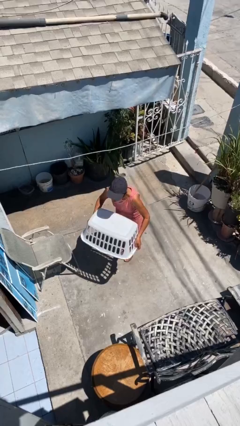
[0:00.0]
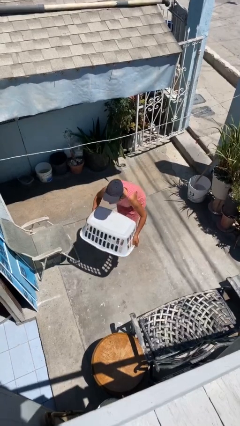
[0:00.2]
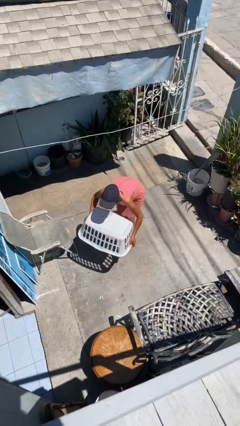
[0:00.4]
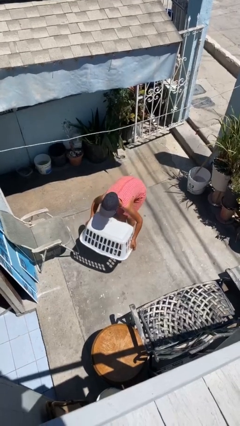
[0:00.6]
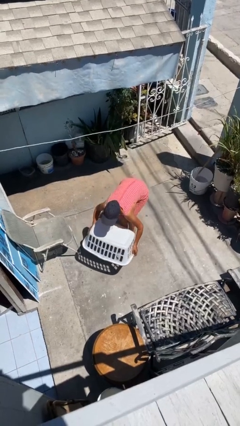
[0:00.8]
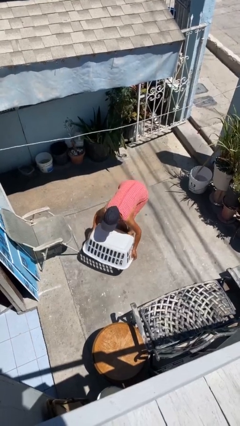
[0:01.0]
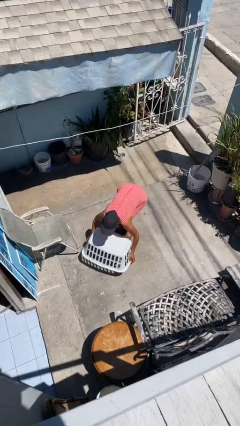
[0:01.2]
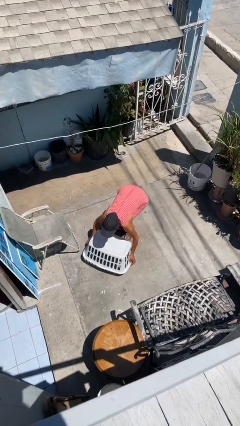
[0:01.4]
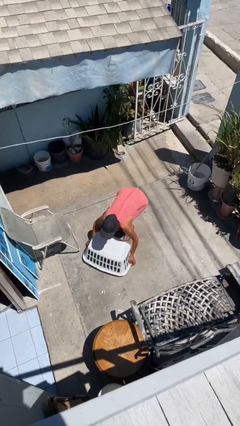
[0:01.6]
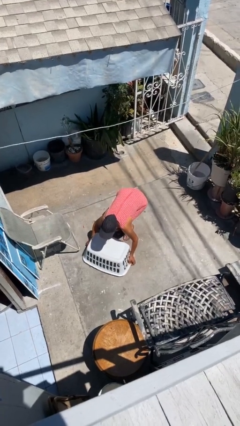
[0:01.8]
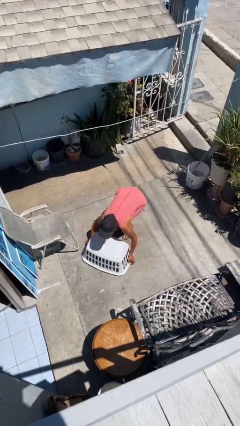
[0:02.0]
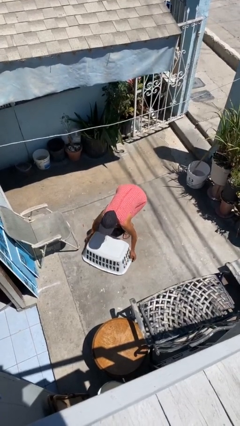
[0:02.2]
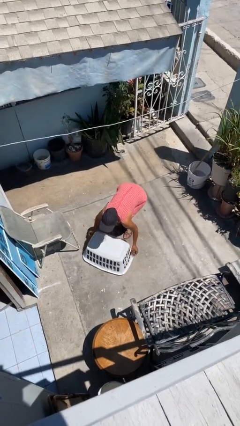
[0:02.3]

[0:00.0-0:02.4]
person puts down object on floor

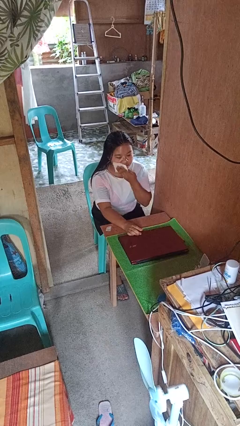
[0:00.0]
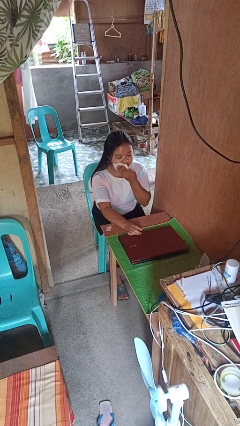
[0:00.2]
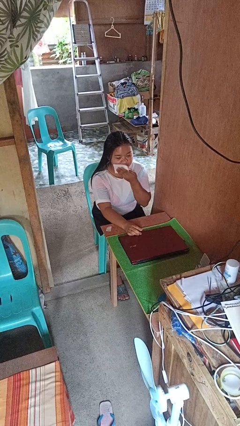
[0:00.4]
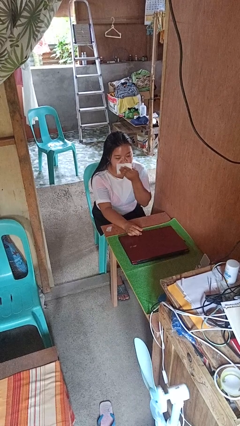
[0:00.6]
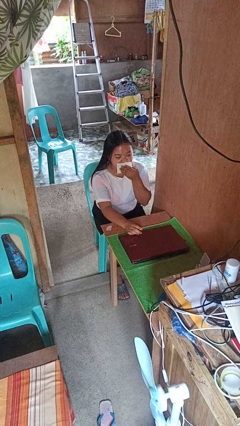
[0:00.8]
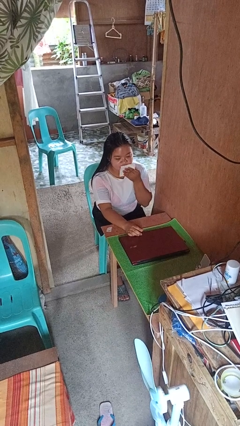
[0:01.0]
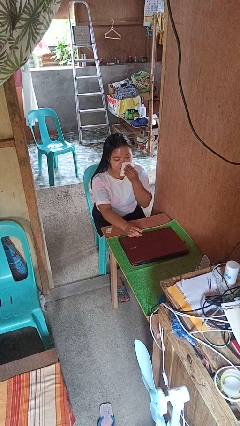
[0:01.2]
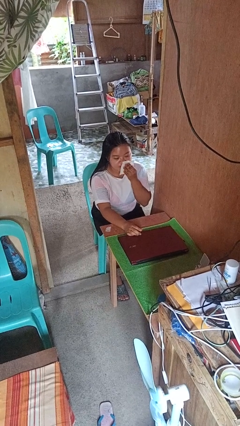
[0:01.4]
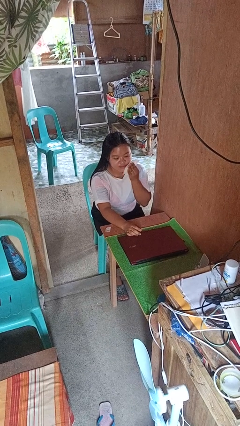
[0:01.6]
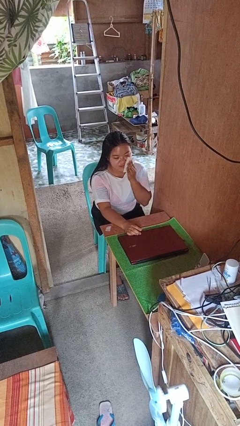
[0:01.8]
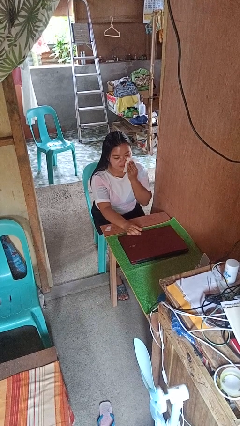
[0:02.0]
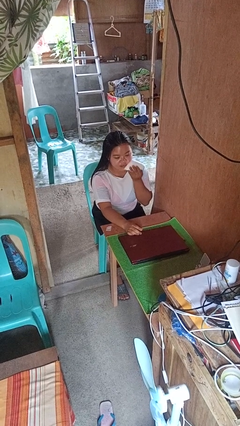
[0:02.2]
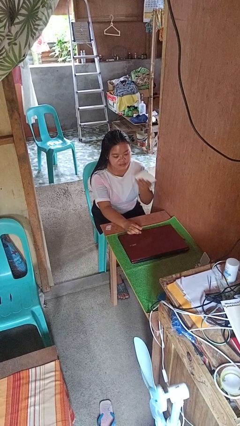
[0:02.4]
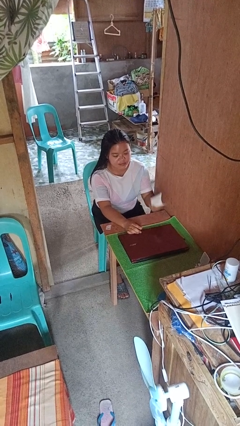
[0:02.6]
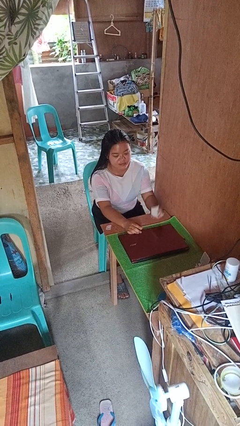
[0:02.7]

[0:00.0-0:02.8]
person wipes mouth with napkin

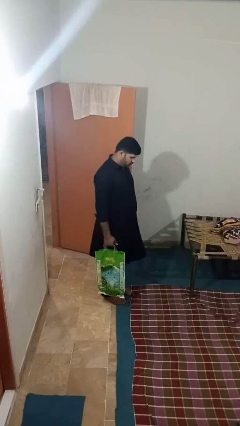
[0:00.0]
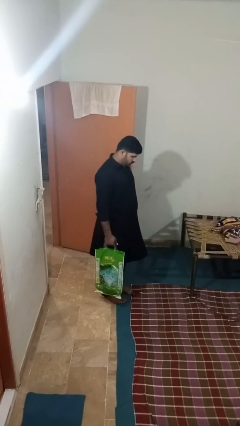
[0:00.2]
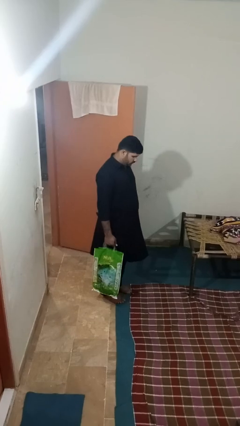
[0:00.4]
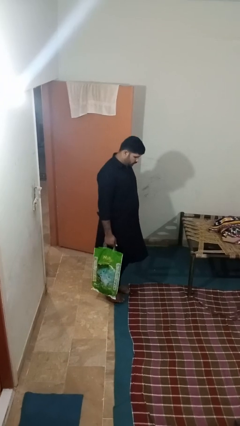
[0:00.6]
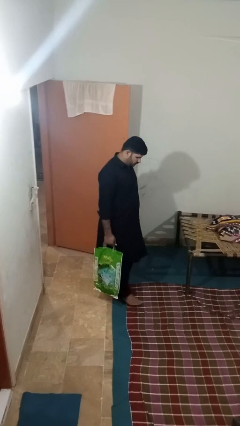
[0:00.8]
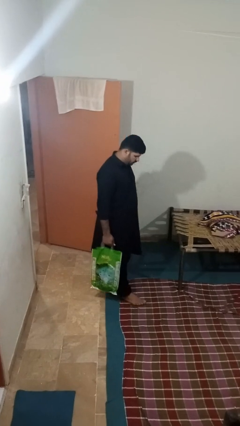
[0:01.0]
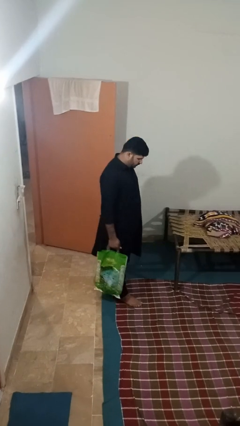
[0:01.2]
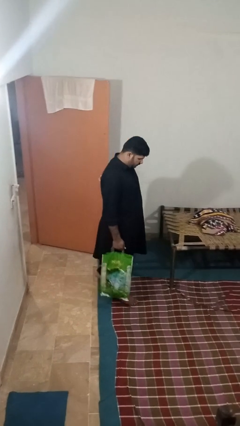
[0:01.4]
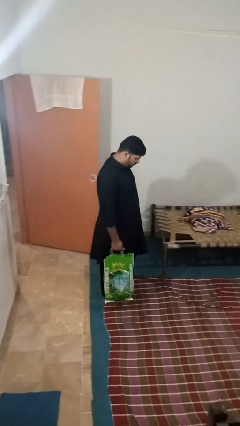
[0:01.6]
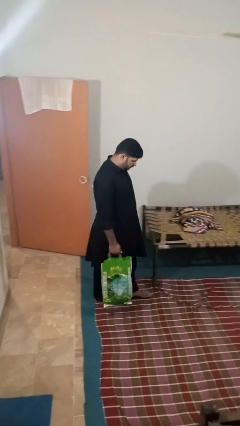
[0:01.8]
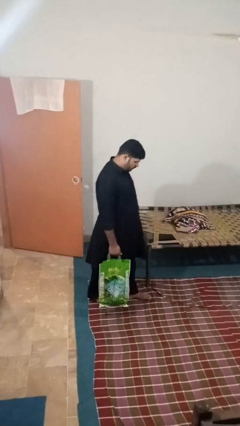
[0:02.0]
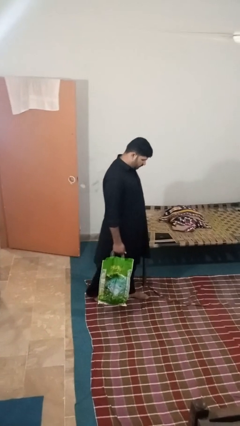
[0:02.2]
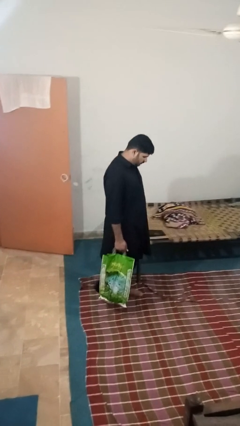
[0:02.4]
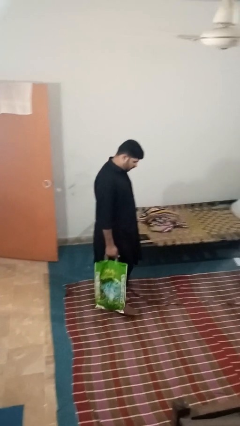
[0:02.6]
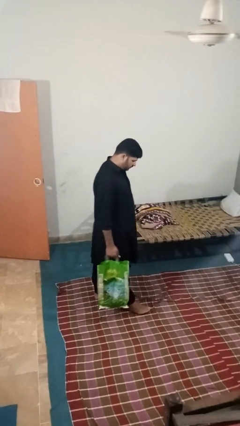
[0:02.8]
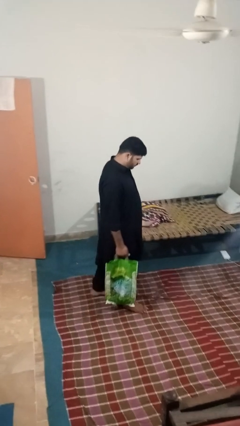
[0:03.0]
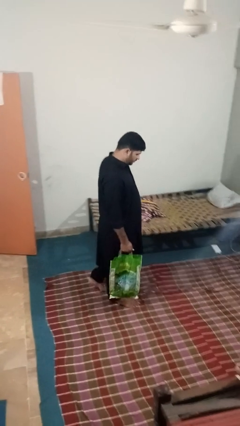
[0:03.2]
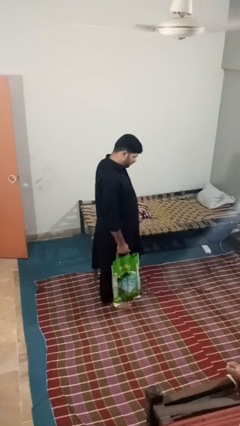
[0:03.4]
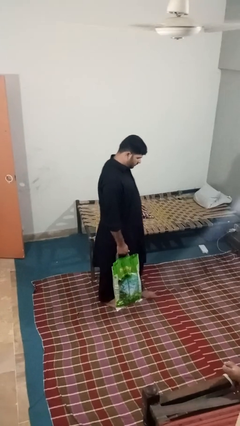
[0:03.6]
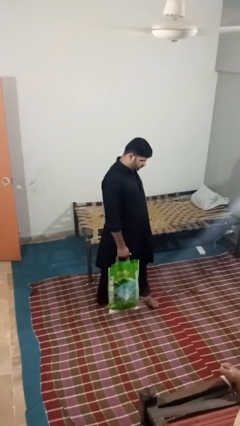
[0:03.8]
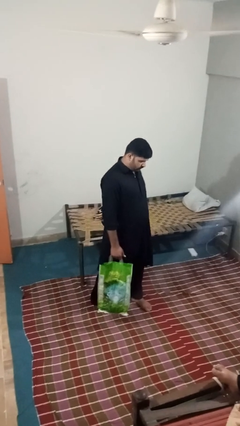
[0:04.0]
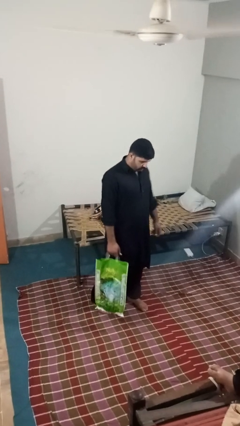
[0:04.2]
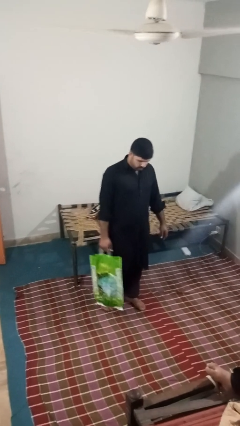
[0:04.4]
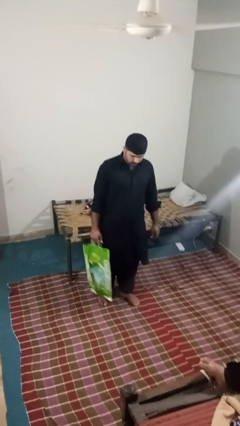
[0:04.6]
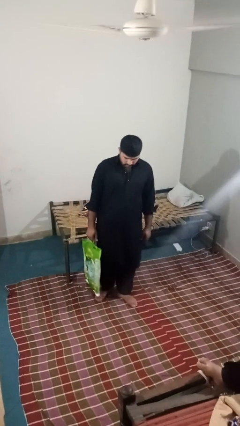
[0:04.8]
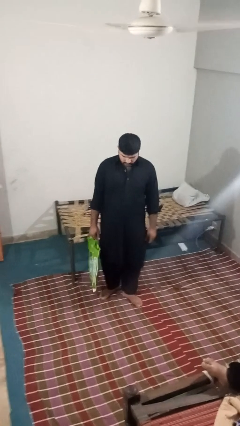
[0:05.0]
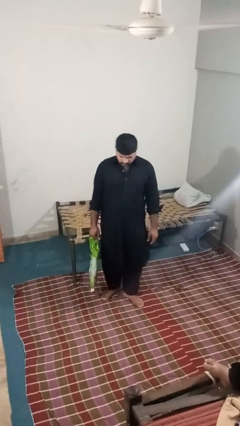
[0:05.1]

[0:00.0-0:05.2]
person carries groceries

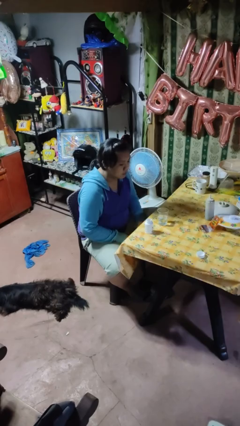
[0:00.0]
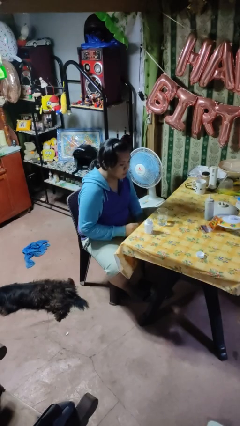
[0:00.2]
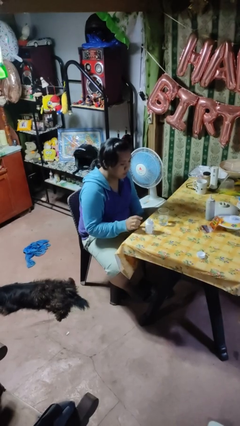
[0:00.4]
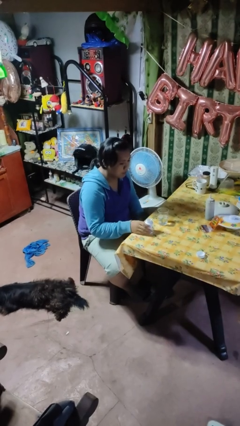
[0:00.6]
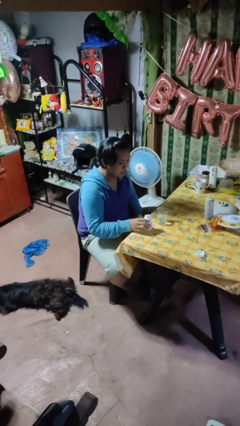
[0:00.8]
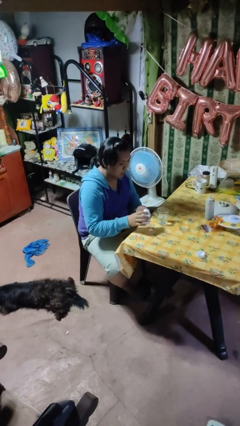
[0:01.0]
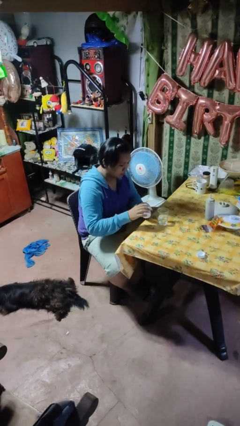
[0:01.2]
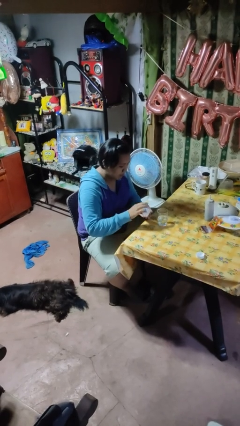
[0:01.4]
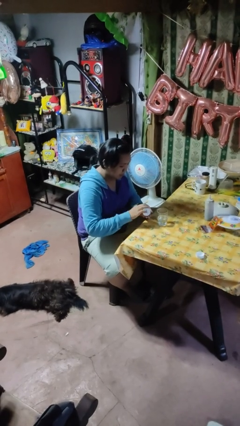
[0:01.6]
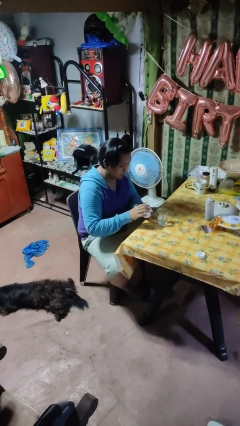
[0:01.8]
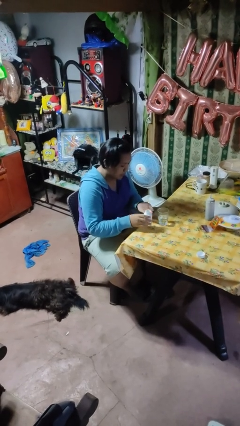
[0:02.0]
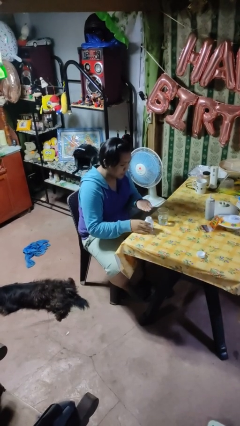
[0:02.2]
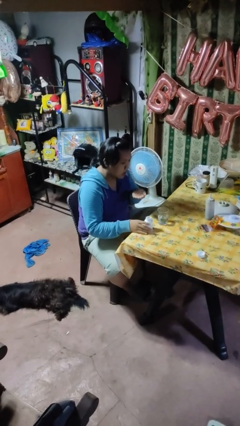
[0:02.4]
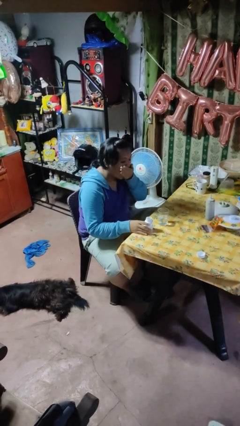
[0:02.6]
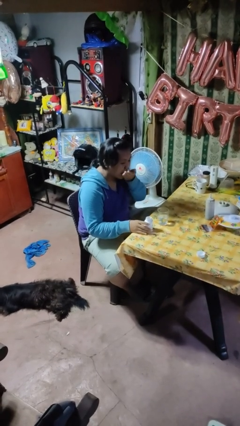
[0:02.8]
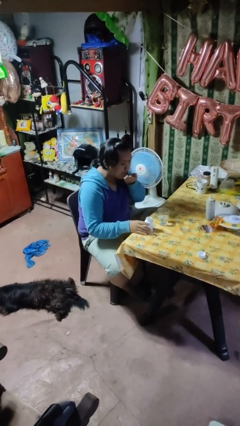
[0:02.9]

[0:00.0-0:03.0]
person takes medicine pills

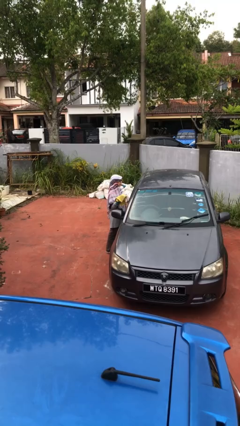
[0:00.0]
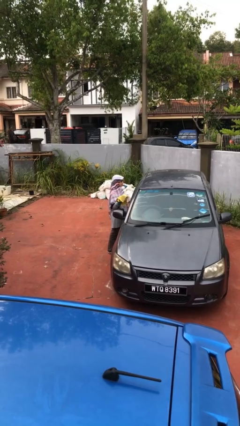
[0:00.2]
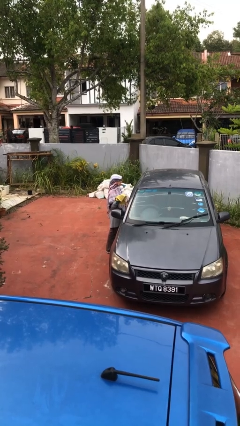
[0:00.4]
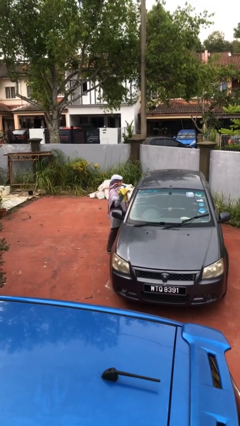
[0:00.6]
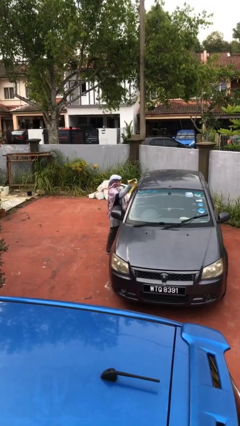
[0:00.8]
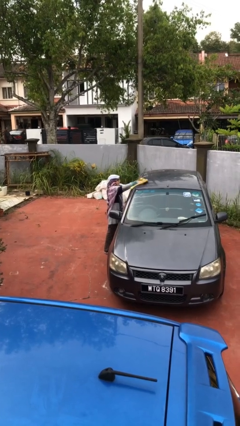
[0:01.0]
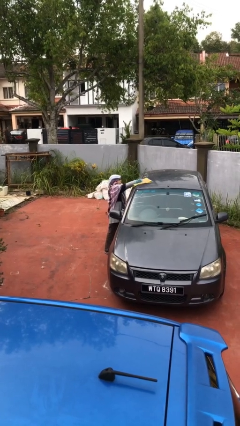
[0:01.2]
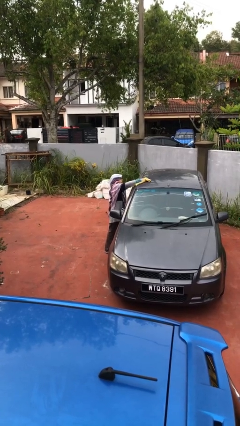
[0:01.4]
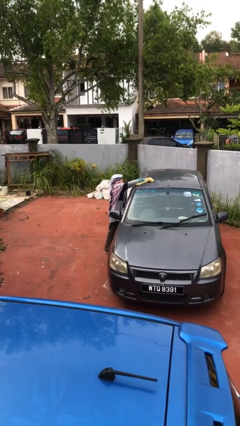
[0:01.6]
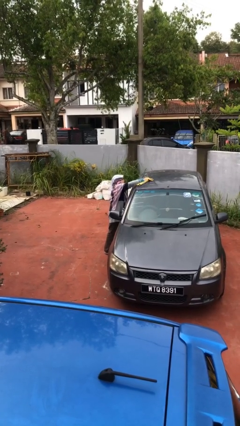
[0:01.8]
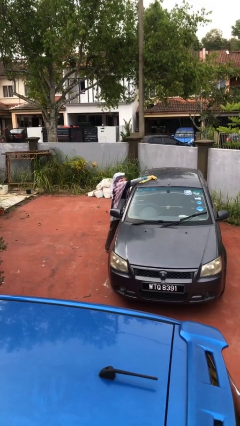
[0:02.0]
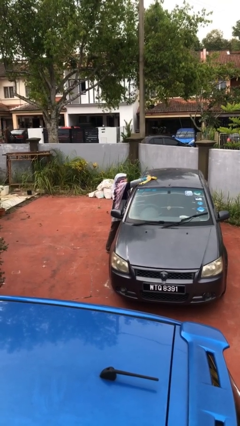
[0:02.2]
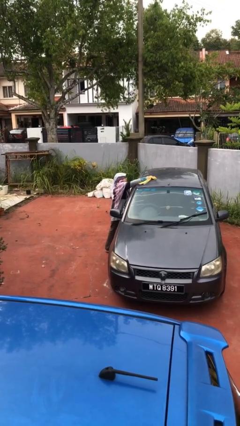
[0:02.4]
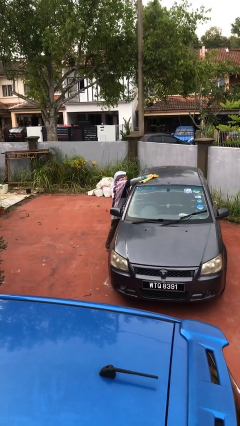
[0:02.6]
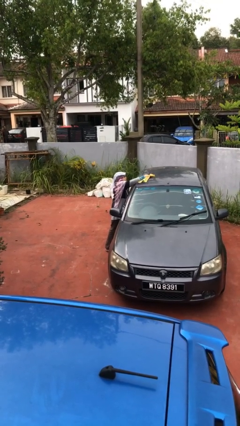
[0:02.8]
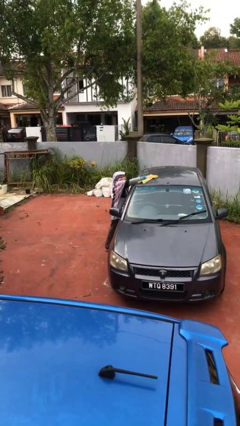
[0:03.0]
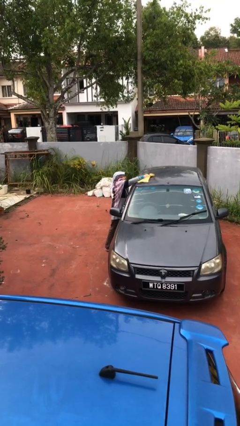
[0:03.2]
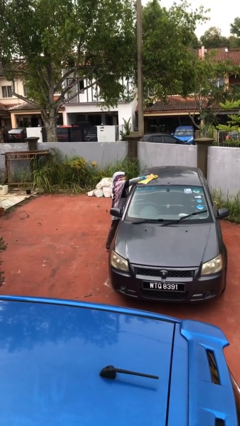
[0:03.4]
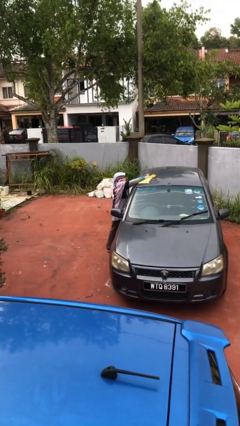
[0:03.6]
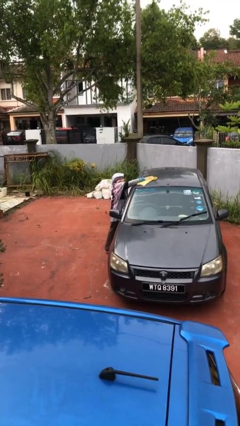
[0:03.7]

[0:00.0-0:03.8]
person polishes car with rag

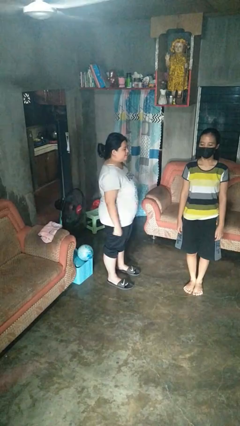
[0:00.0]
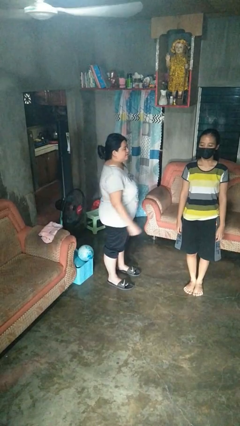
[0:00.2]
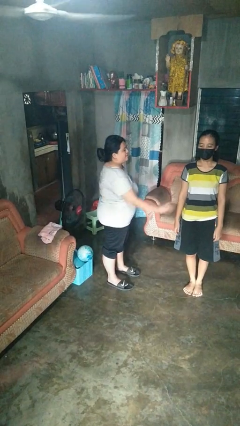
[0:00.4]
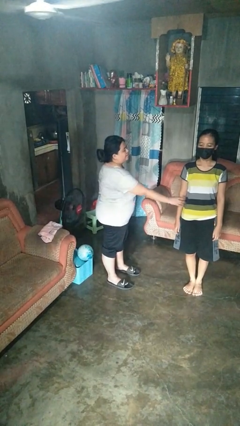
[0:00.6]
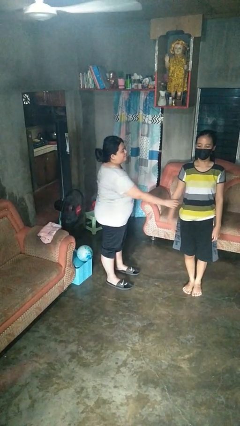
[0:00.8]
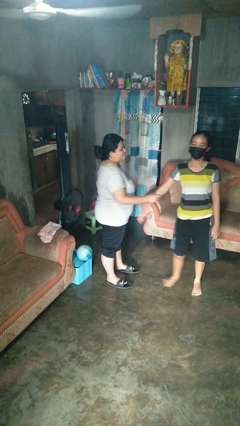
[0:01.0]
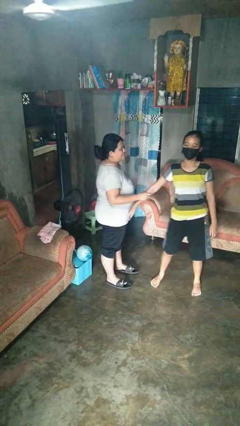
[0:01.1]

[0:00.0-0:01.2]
person grabs person by forearm
